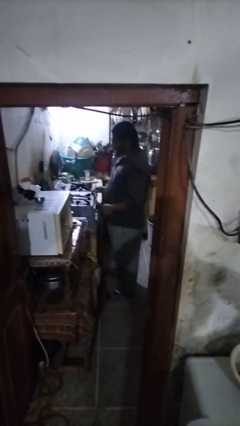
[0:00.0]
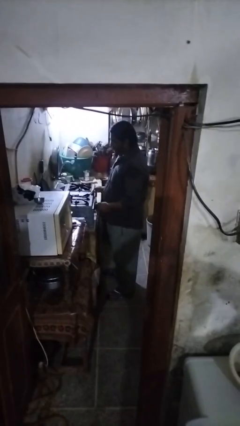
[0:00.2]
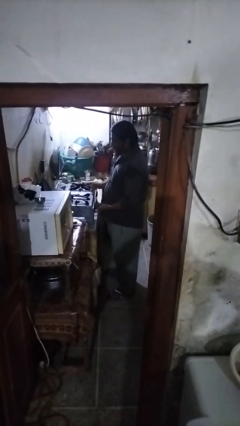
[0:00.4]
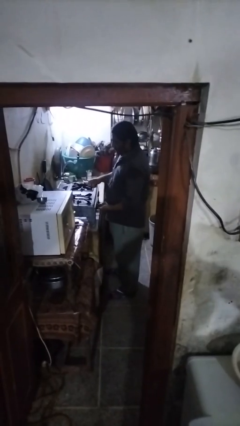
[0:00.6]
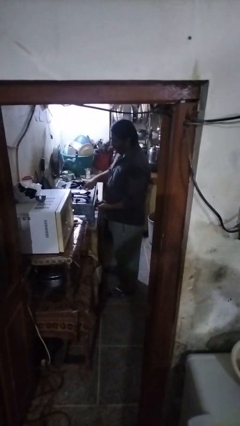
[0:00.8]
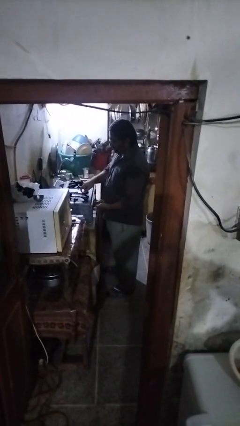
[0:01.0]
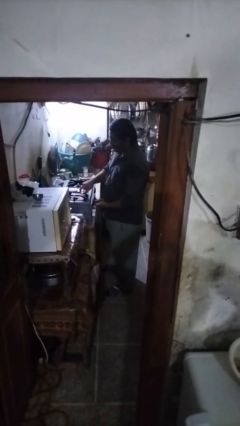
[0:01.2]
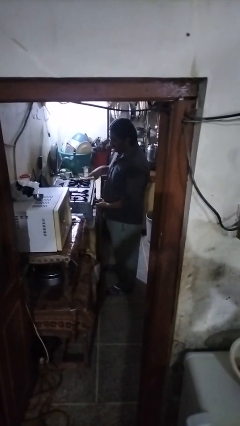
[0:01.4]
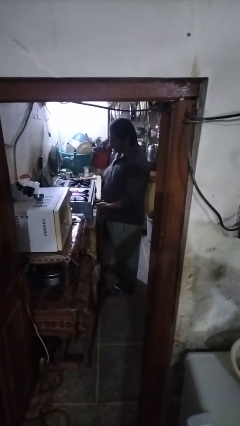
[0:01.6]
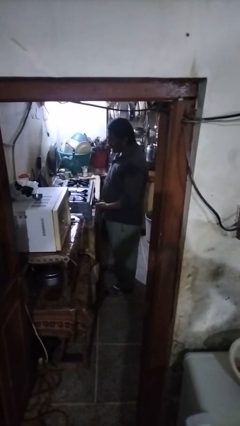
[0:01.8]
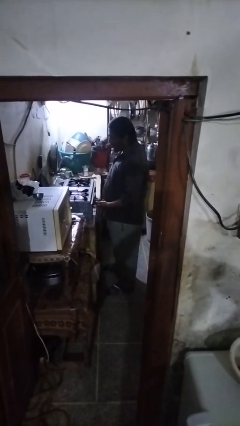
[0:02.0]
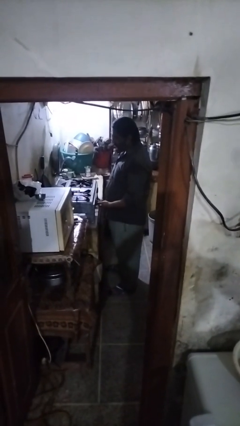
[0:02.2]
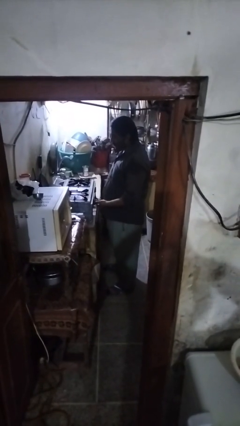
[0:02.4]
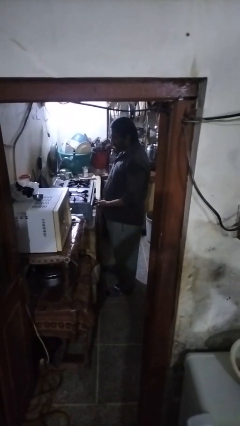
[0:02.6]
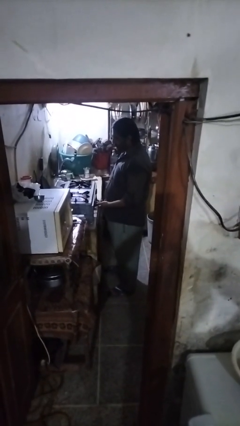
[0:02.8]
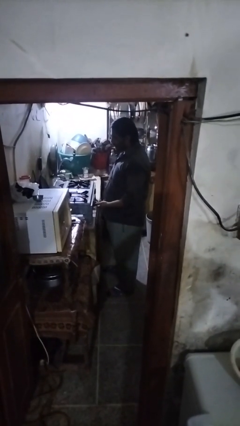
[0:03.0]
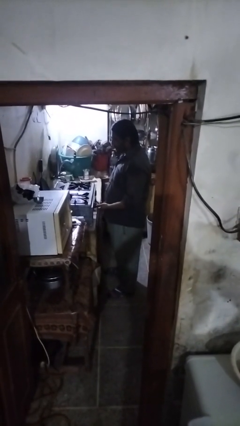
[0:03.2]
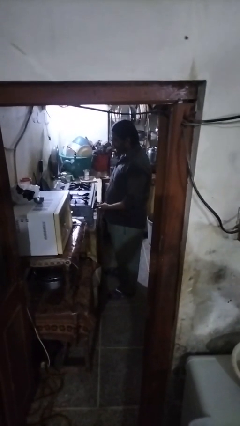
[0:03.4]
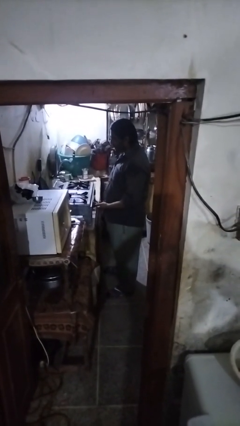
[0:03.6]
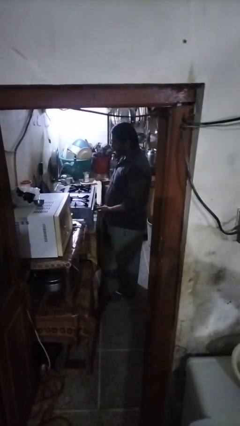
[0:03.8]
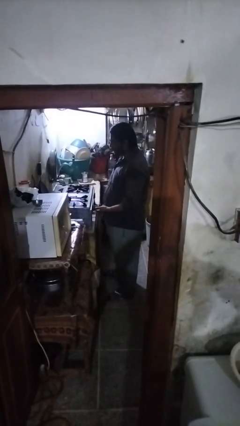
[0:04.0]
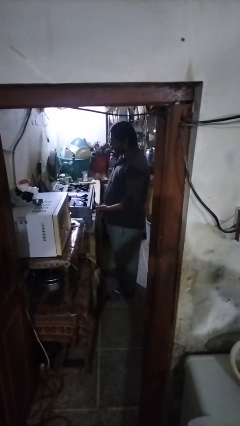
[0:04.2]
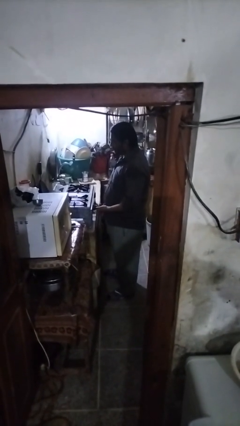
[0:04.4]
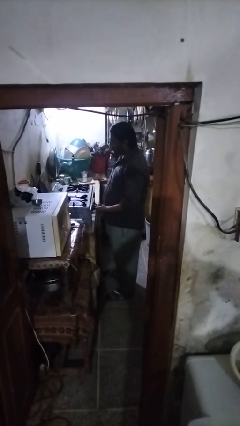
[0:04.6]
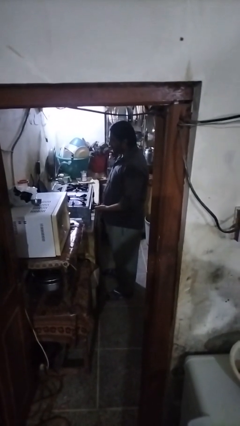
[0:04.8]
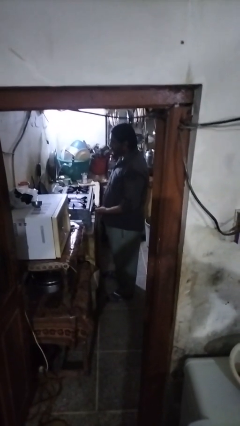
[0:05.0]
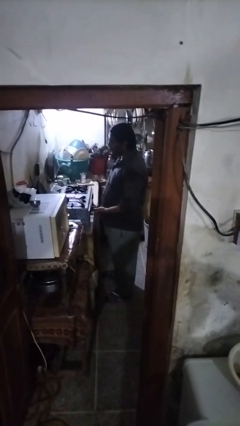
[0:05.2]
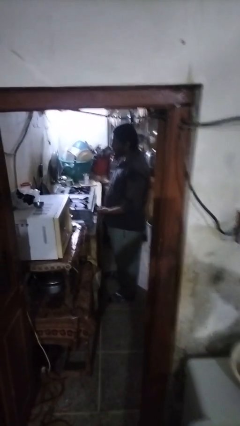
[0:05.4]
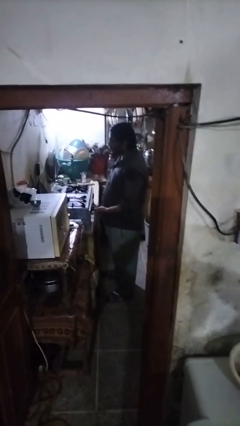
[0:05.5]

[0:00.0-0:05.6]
person turns on stovetop

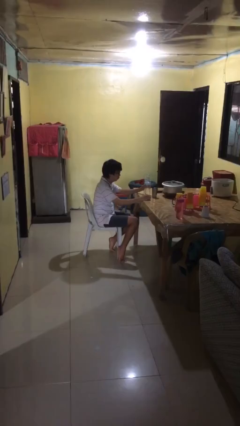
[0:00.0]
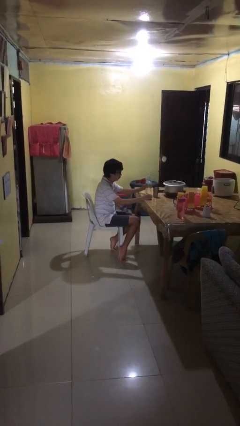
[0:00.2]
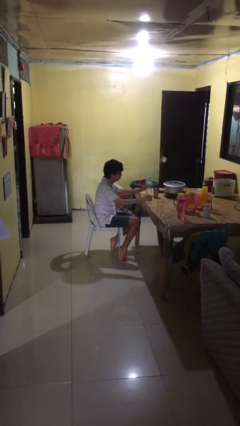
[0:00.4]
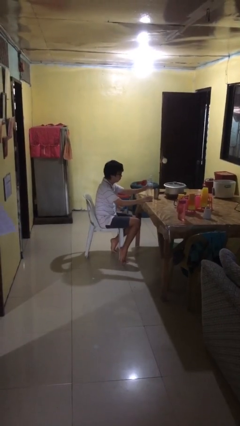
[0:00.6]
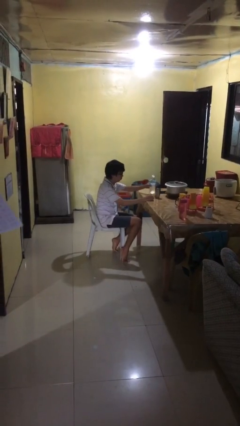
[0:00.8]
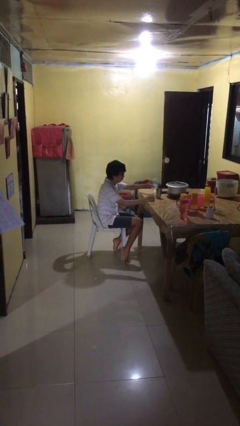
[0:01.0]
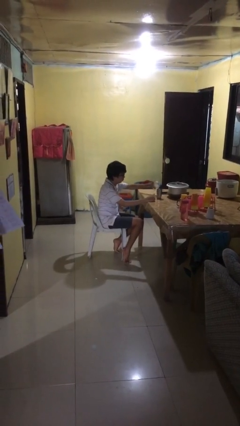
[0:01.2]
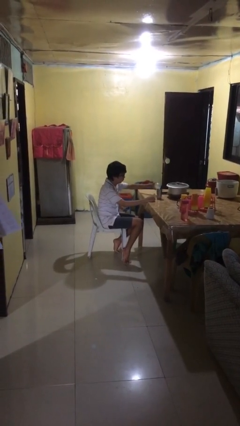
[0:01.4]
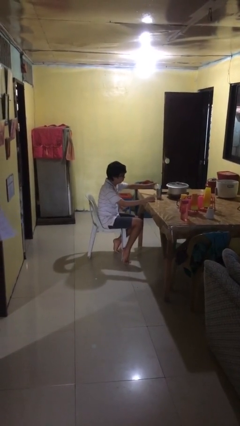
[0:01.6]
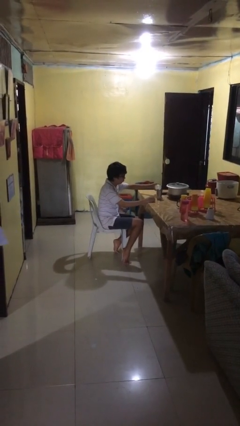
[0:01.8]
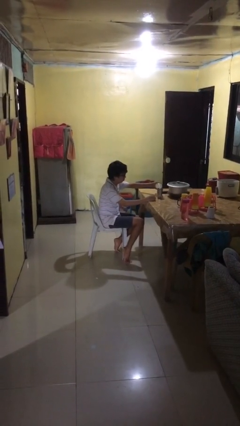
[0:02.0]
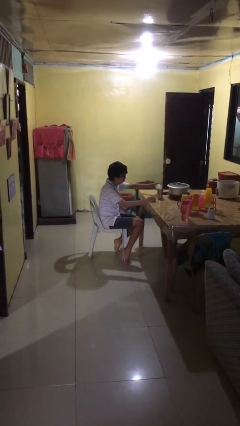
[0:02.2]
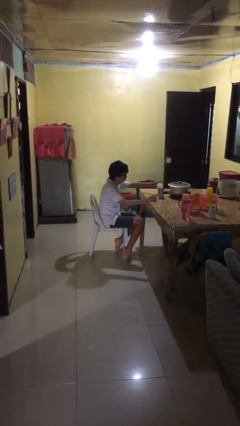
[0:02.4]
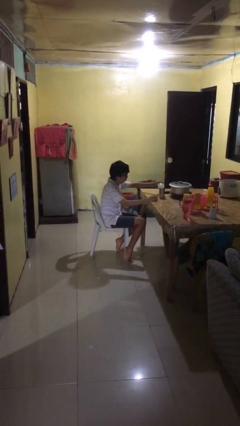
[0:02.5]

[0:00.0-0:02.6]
person pours liquid into cup

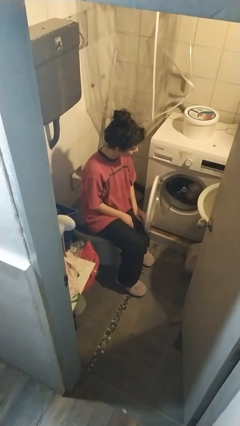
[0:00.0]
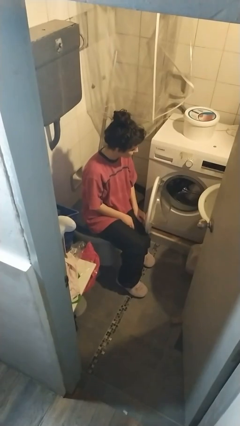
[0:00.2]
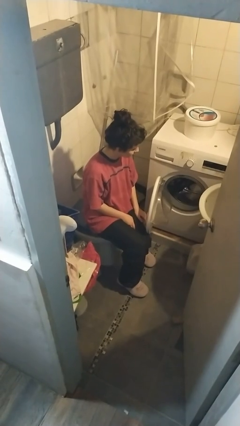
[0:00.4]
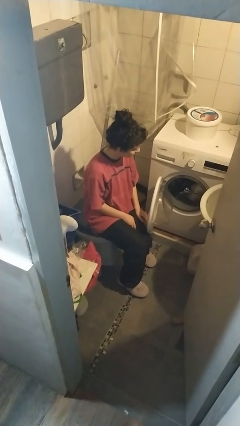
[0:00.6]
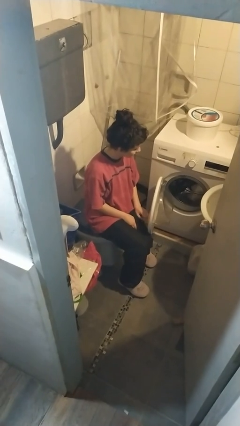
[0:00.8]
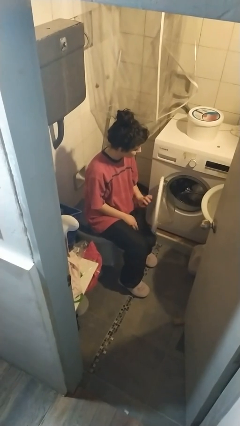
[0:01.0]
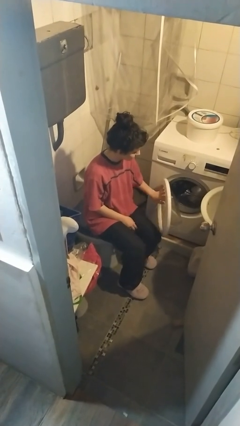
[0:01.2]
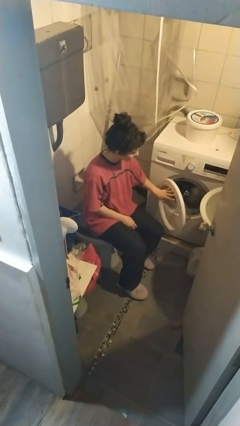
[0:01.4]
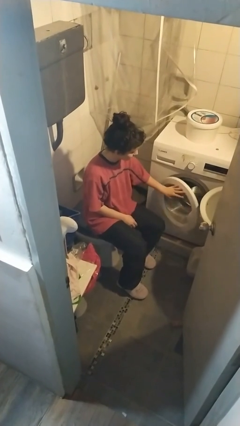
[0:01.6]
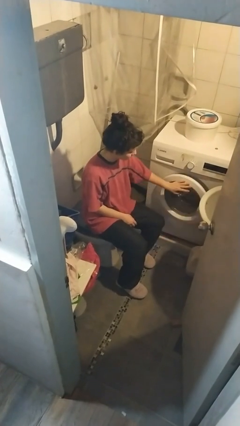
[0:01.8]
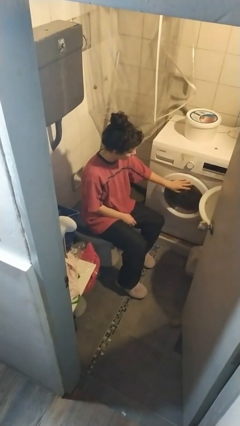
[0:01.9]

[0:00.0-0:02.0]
person closes clothes washer

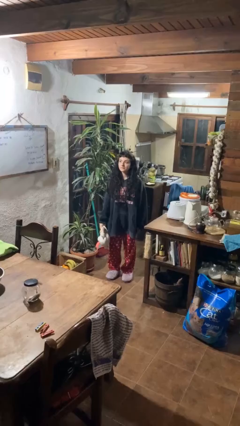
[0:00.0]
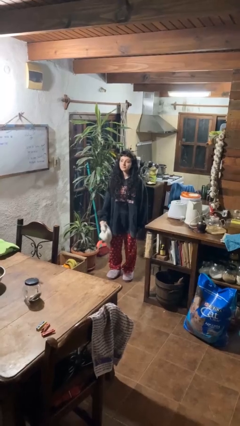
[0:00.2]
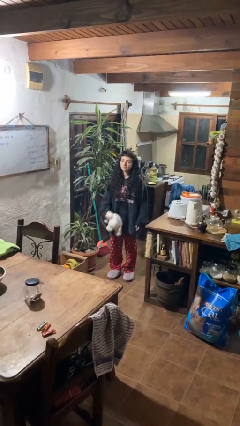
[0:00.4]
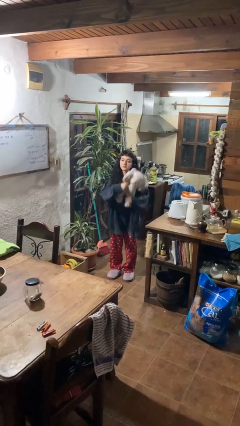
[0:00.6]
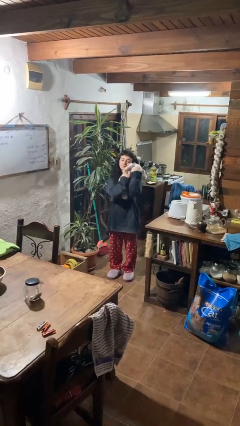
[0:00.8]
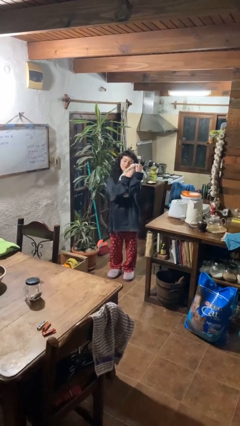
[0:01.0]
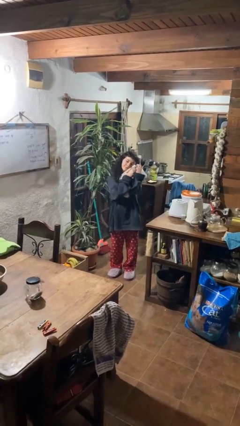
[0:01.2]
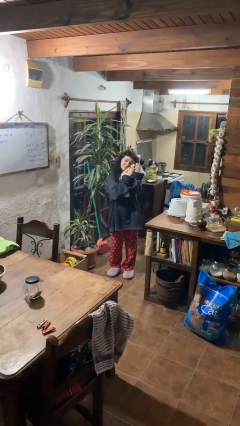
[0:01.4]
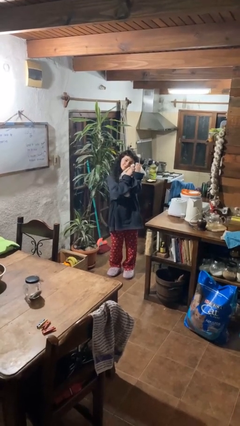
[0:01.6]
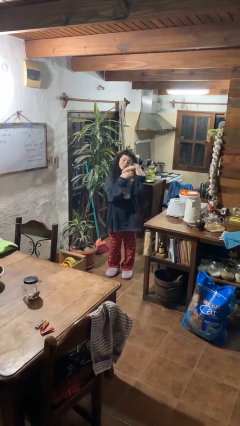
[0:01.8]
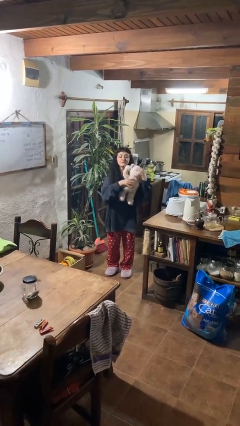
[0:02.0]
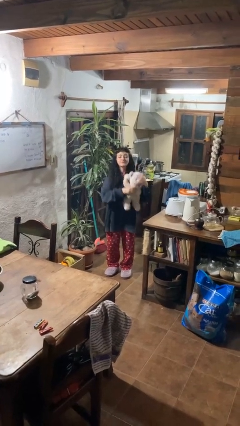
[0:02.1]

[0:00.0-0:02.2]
person hugs stuffed animal

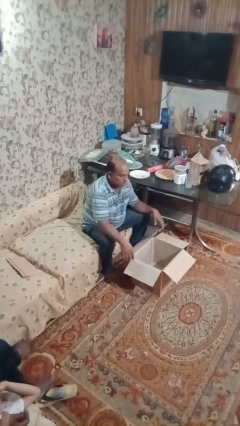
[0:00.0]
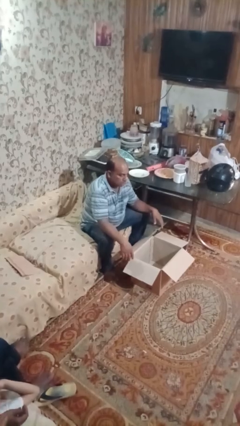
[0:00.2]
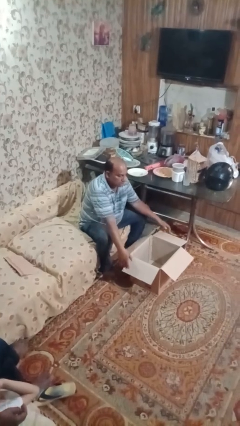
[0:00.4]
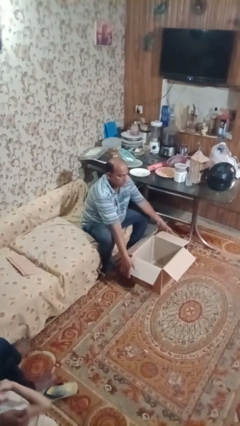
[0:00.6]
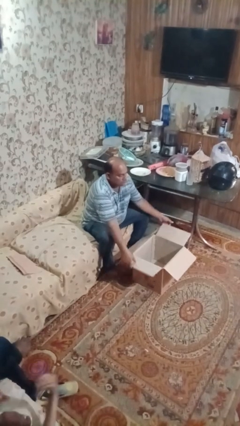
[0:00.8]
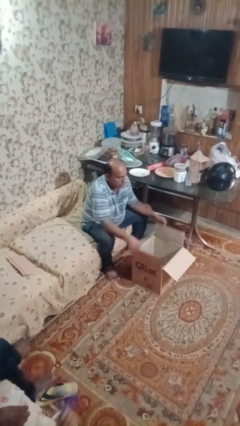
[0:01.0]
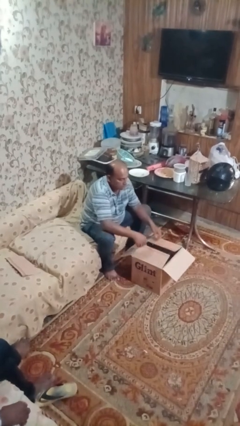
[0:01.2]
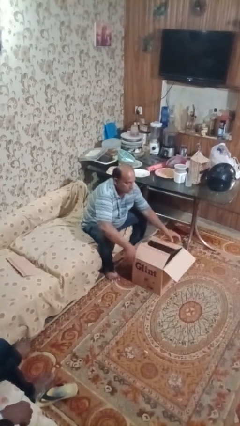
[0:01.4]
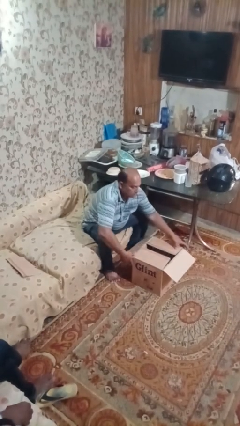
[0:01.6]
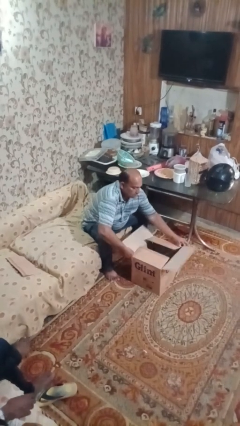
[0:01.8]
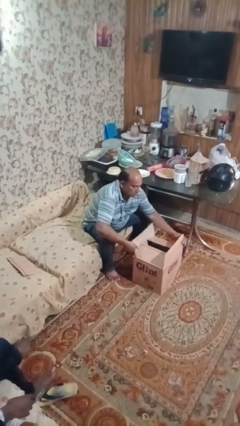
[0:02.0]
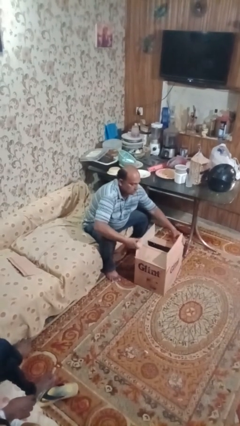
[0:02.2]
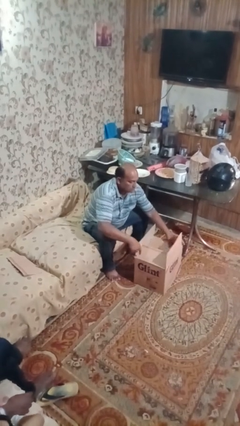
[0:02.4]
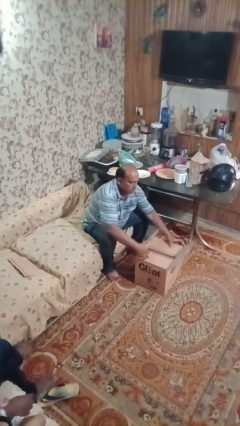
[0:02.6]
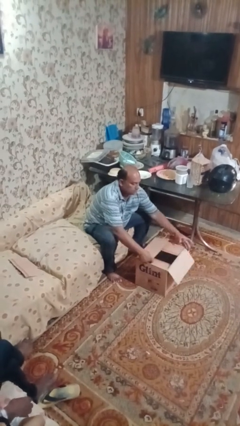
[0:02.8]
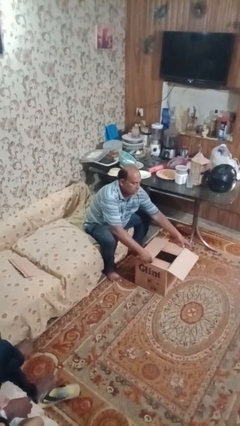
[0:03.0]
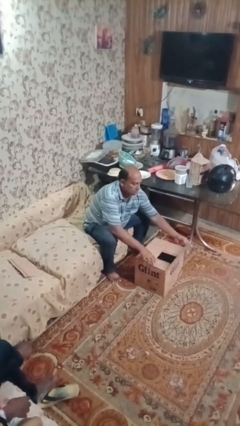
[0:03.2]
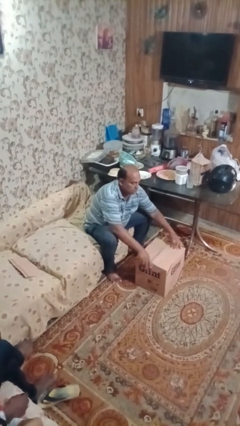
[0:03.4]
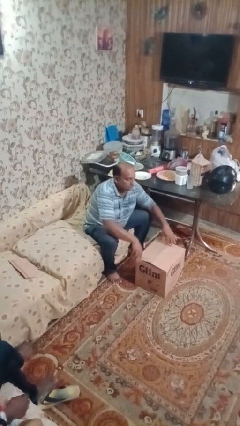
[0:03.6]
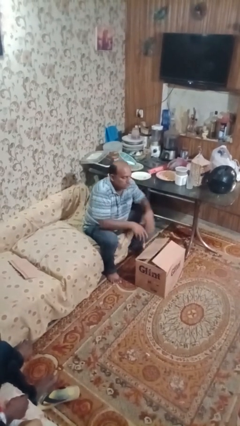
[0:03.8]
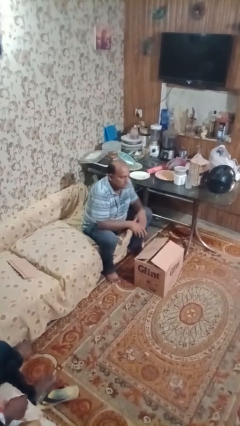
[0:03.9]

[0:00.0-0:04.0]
person closes box

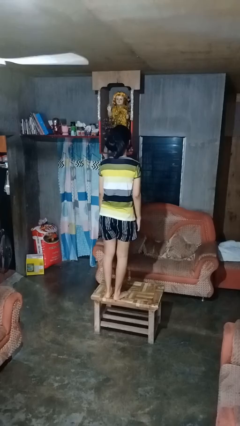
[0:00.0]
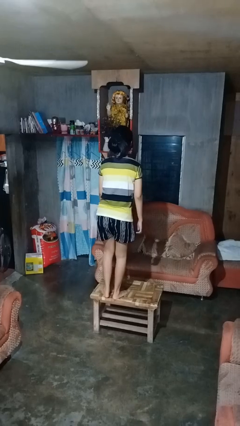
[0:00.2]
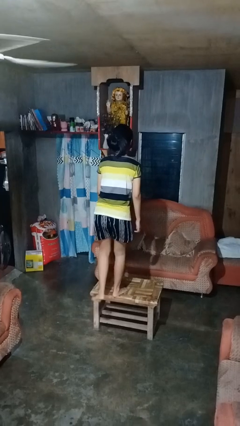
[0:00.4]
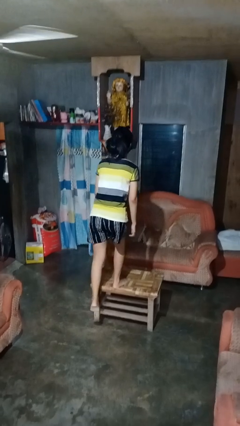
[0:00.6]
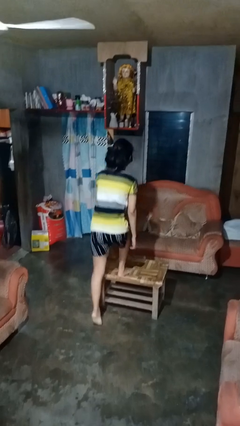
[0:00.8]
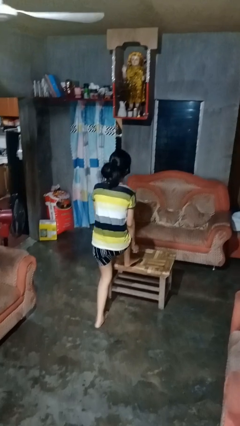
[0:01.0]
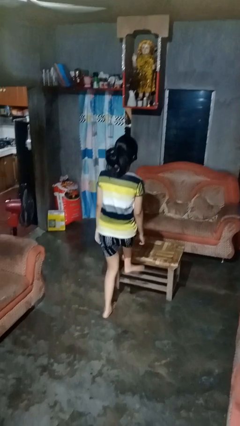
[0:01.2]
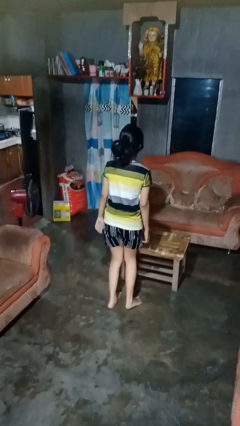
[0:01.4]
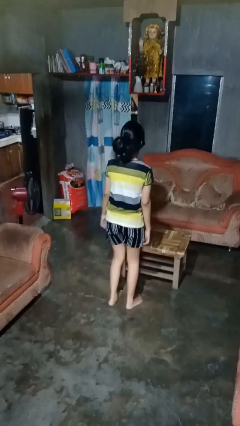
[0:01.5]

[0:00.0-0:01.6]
person climbs off table
